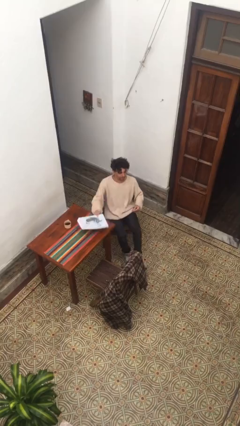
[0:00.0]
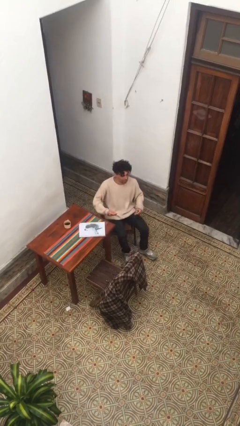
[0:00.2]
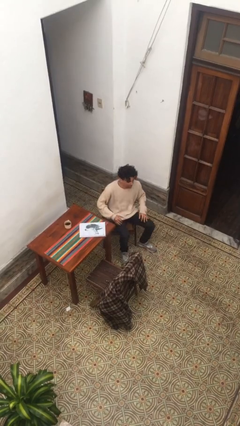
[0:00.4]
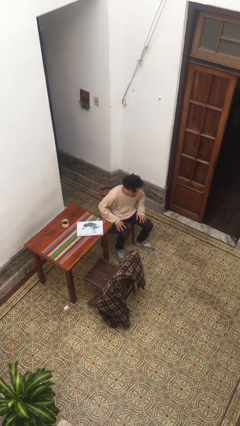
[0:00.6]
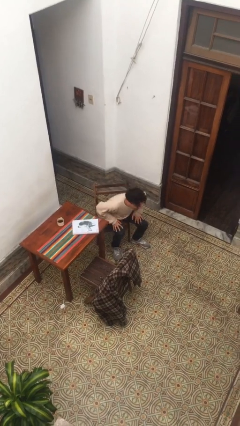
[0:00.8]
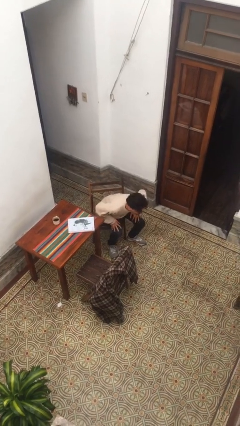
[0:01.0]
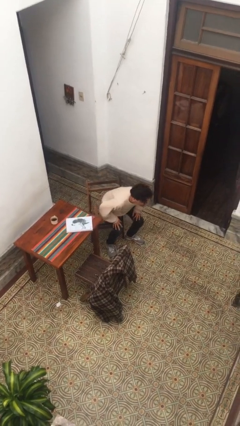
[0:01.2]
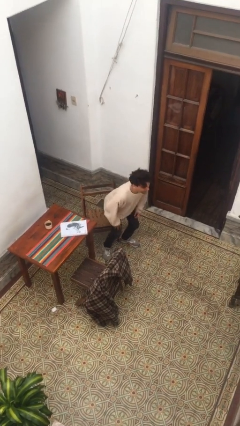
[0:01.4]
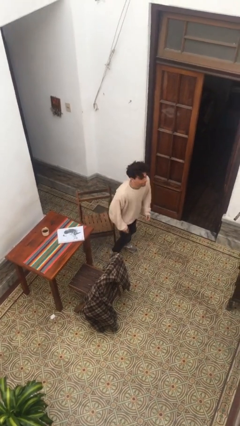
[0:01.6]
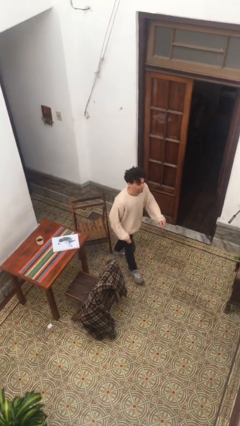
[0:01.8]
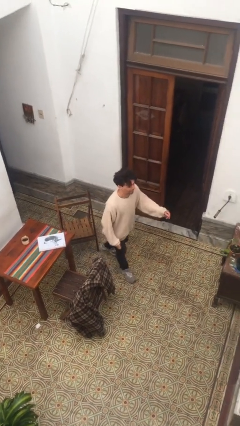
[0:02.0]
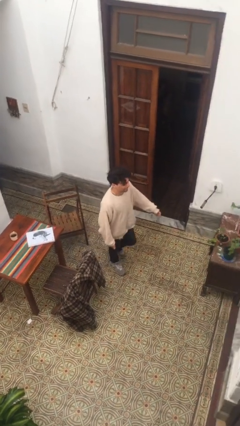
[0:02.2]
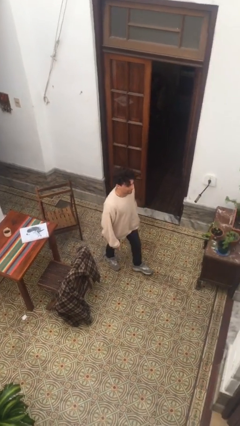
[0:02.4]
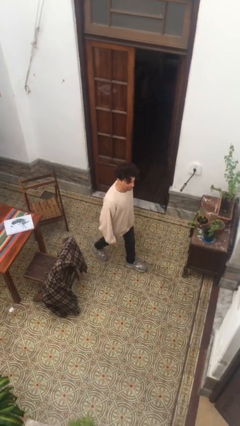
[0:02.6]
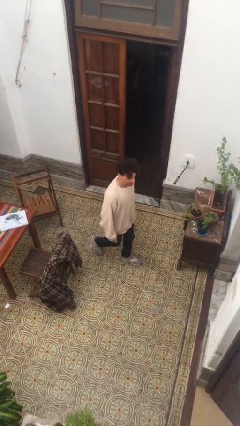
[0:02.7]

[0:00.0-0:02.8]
person stands up

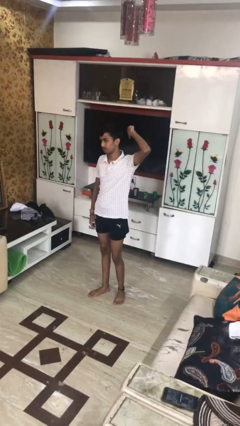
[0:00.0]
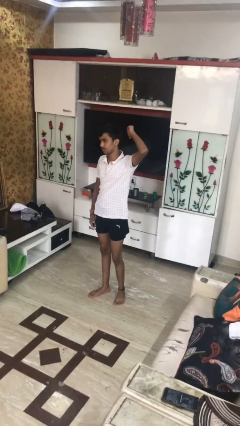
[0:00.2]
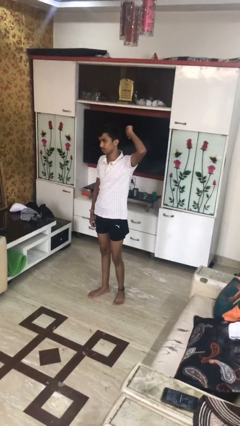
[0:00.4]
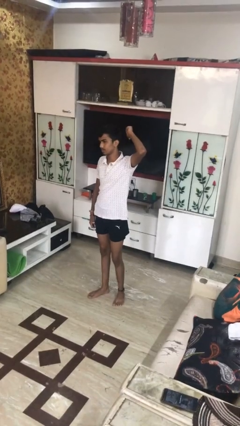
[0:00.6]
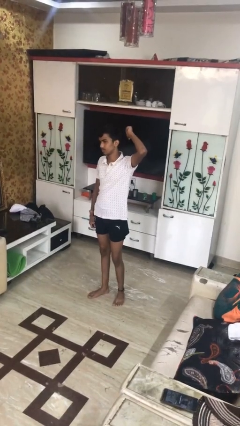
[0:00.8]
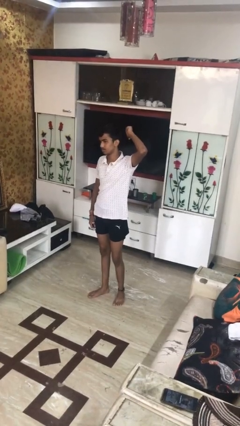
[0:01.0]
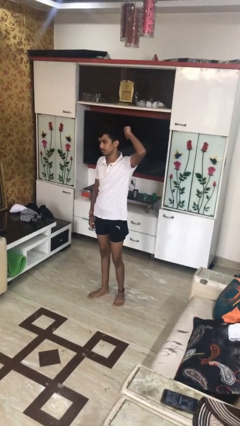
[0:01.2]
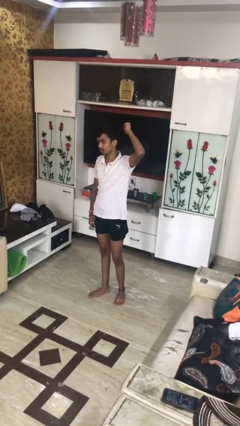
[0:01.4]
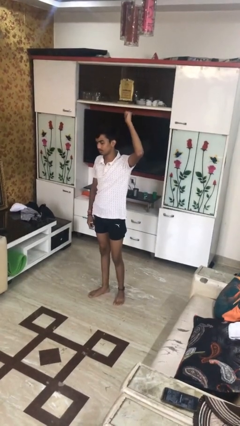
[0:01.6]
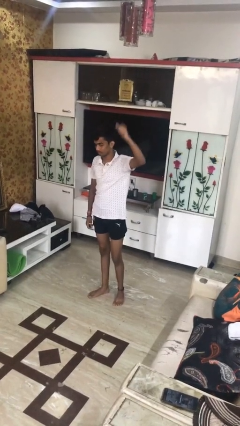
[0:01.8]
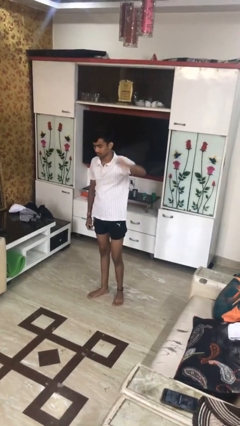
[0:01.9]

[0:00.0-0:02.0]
person gestures behind me

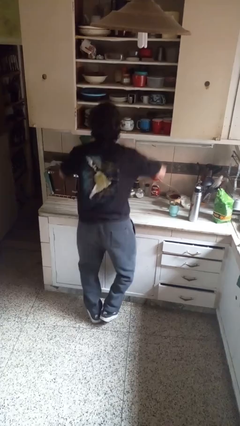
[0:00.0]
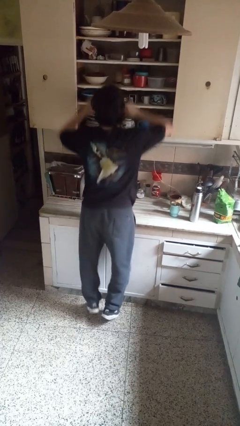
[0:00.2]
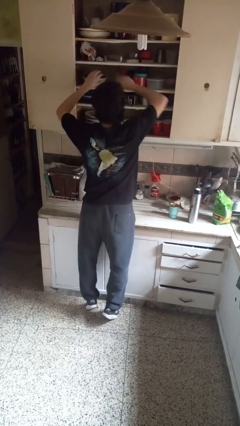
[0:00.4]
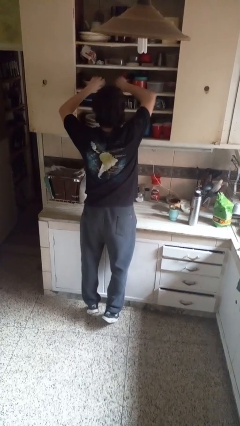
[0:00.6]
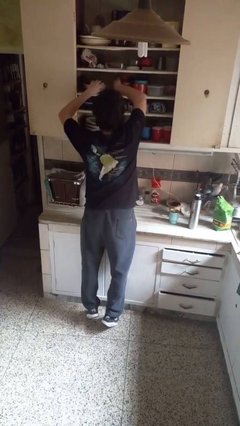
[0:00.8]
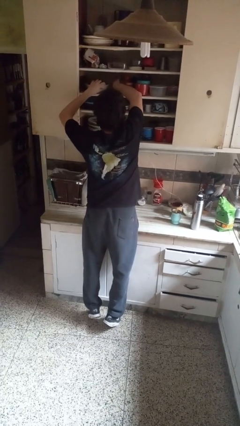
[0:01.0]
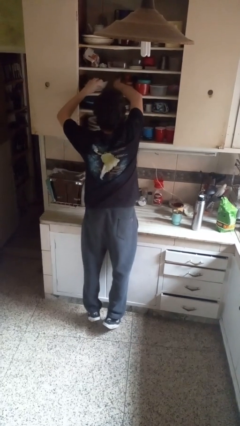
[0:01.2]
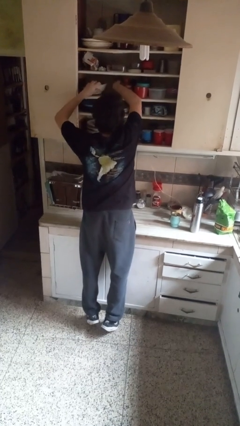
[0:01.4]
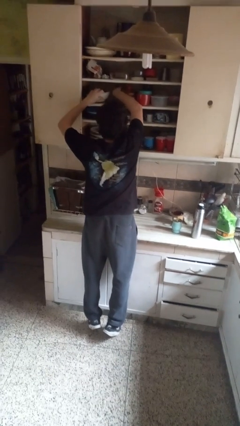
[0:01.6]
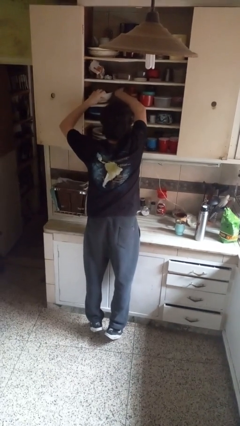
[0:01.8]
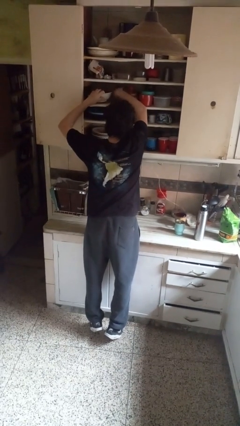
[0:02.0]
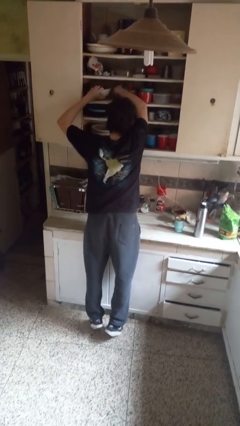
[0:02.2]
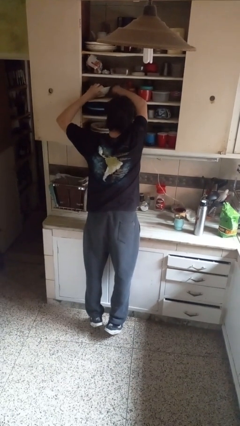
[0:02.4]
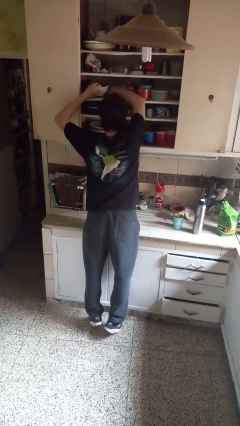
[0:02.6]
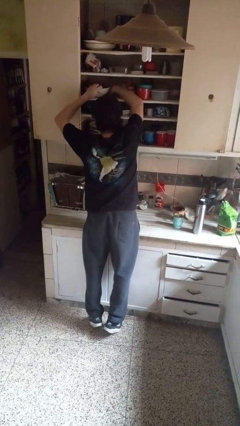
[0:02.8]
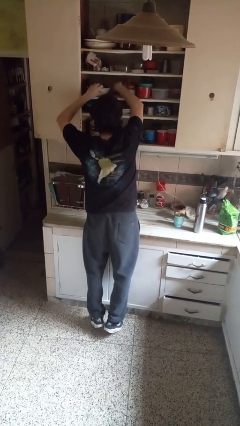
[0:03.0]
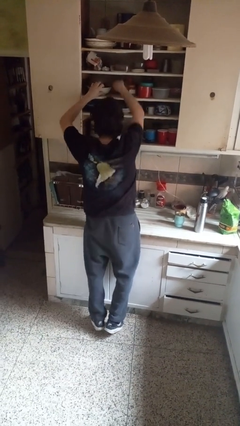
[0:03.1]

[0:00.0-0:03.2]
person searches in cabinet

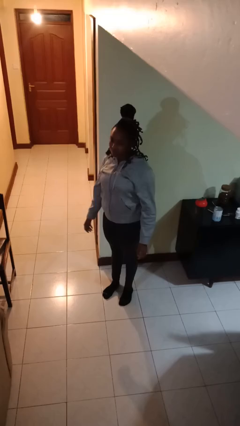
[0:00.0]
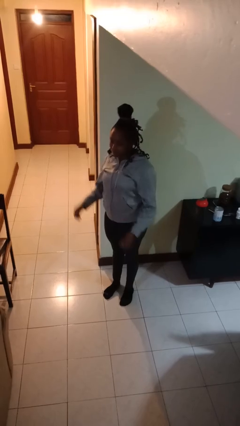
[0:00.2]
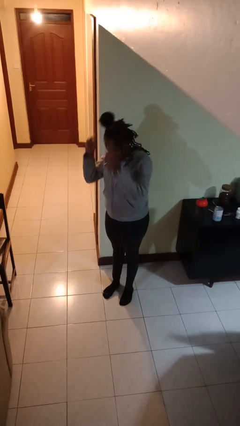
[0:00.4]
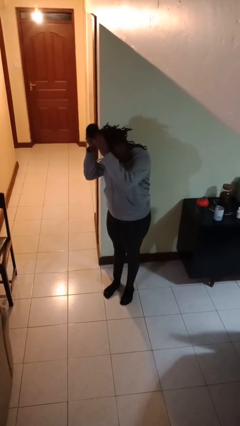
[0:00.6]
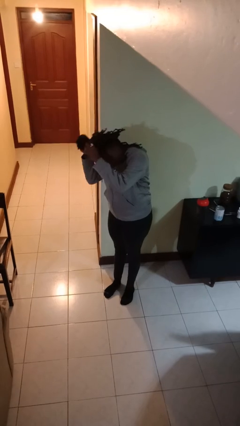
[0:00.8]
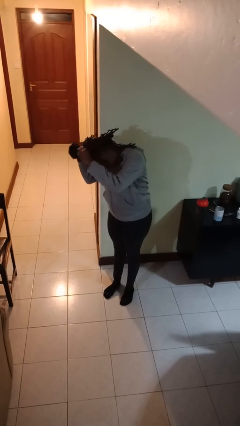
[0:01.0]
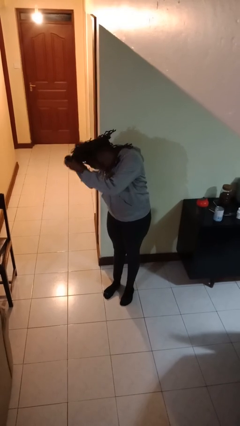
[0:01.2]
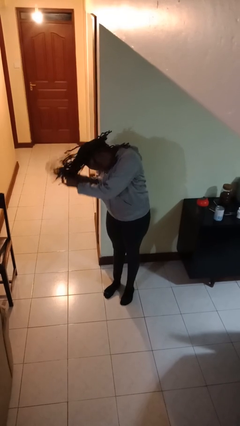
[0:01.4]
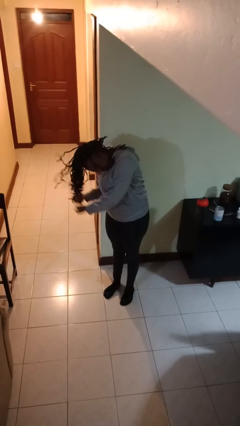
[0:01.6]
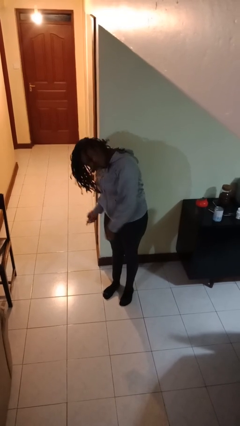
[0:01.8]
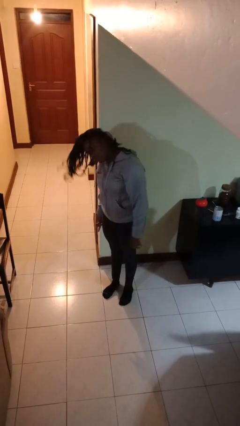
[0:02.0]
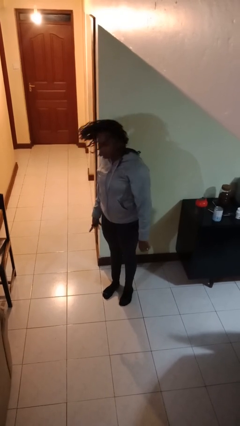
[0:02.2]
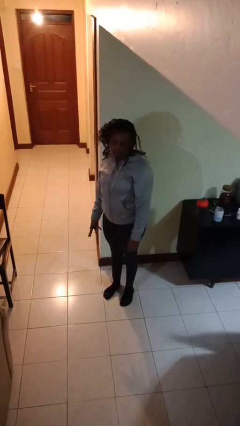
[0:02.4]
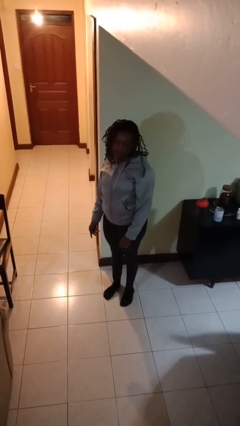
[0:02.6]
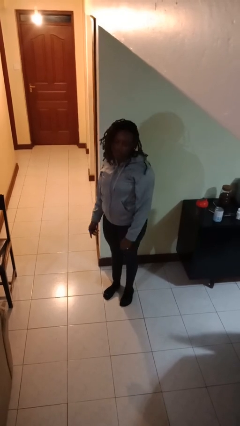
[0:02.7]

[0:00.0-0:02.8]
person takes off hairtie

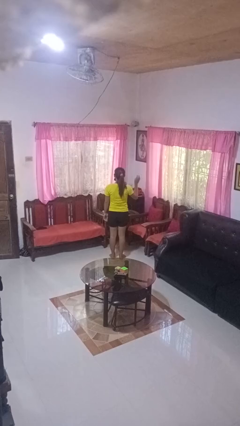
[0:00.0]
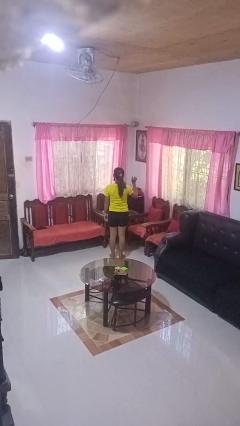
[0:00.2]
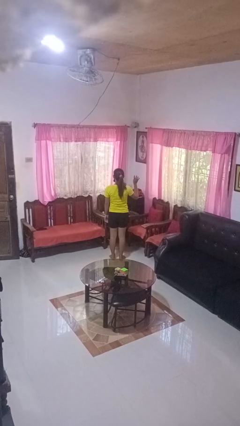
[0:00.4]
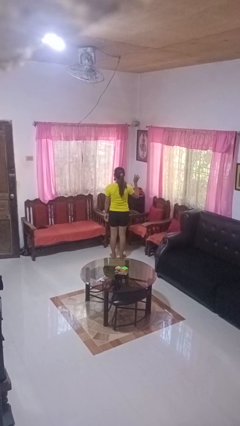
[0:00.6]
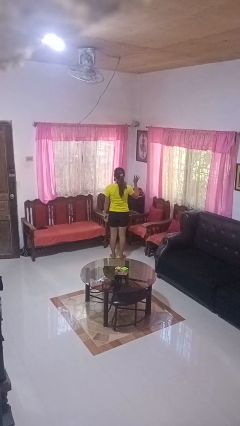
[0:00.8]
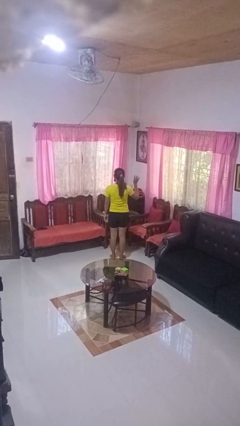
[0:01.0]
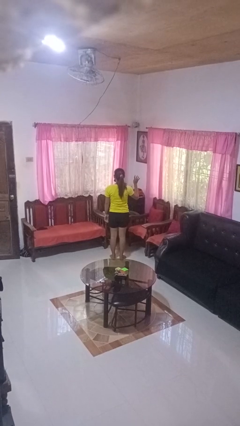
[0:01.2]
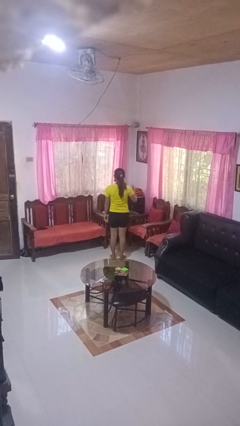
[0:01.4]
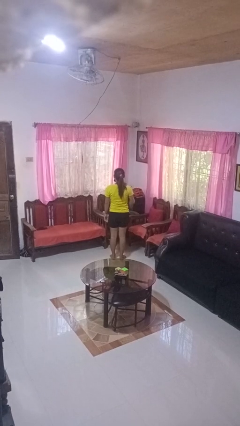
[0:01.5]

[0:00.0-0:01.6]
person gestures number four

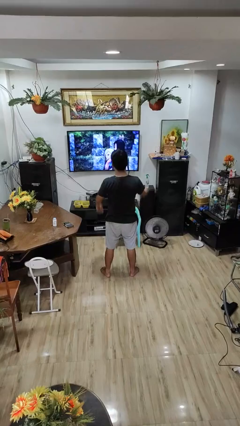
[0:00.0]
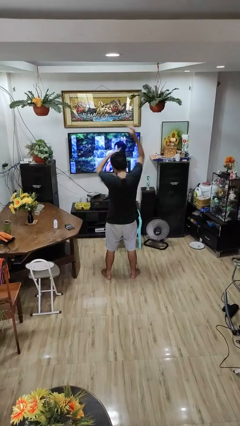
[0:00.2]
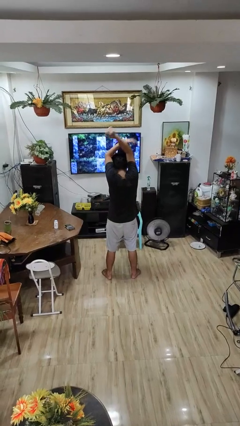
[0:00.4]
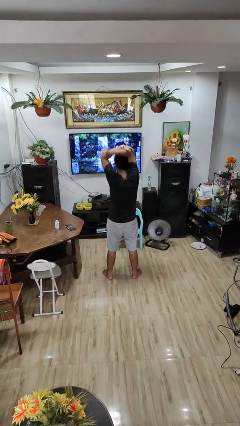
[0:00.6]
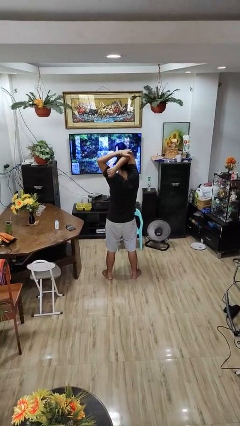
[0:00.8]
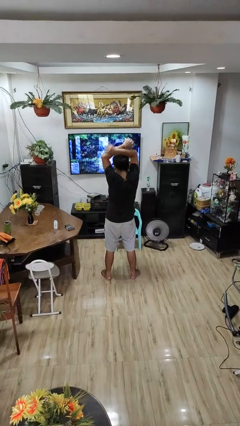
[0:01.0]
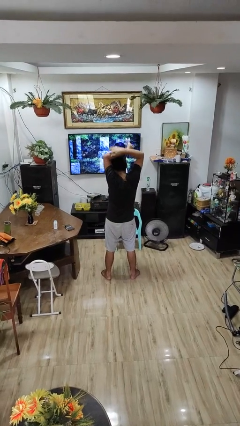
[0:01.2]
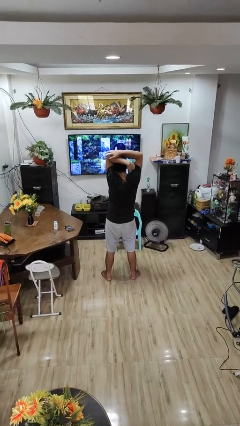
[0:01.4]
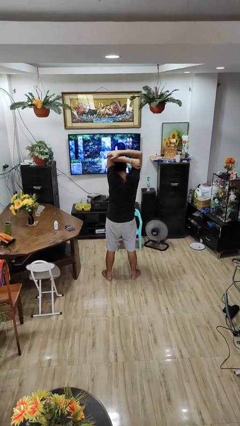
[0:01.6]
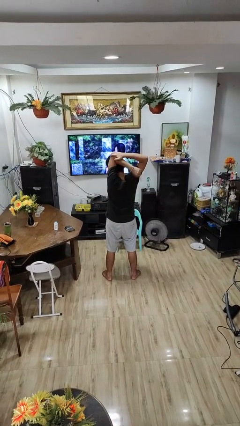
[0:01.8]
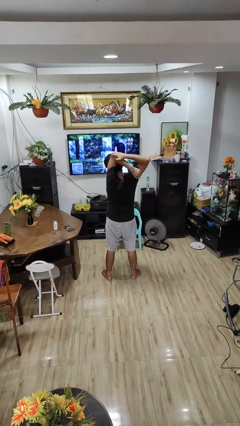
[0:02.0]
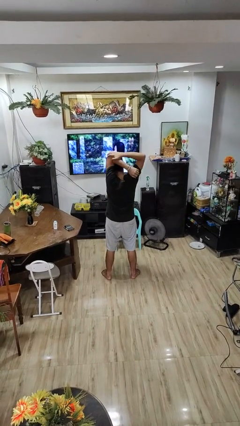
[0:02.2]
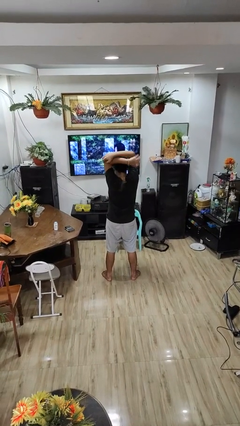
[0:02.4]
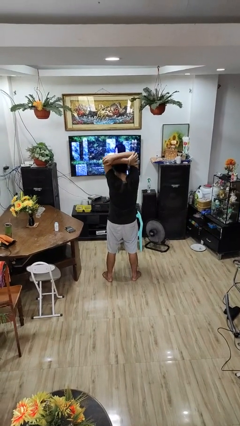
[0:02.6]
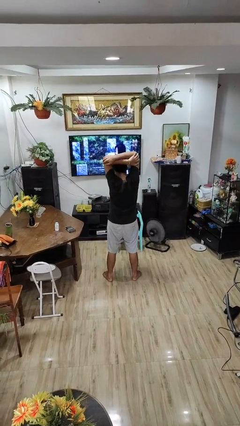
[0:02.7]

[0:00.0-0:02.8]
person stretches arms over head

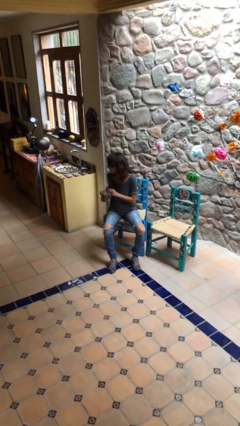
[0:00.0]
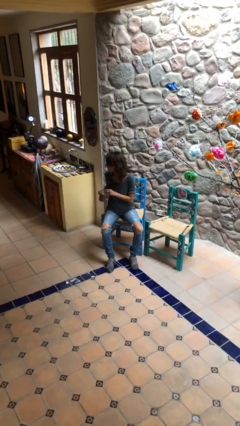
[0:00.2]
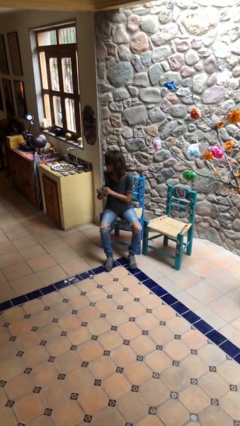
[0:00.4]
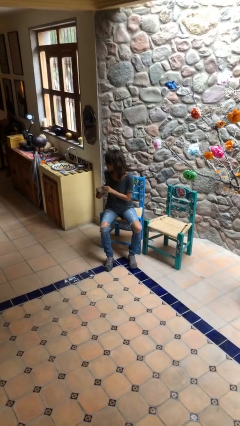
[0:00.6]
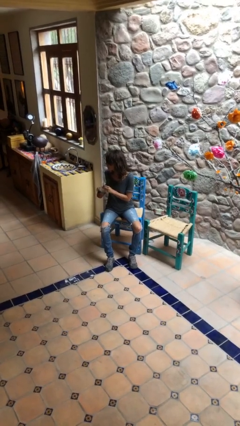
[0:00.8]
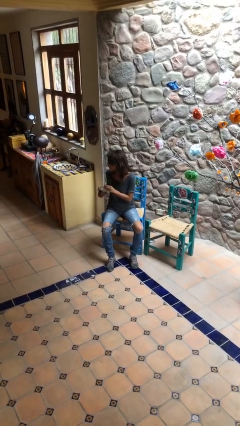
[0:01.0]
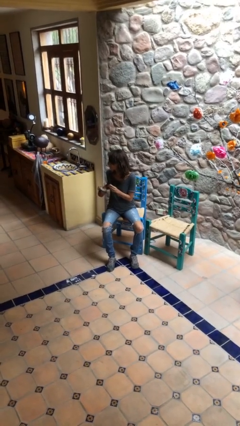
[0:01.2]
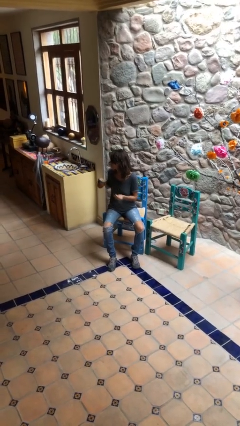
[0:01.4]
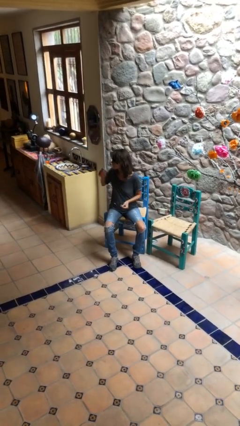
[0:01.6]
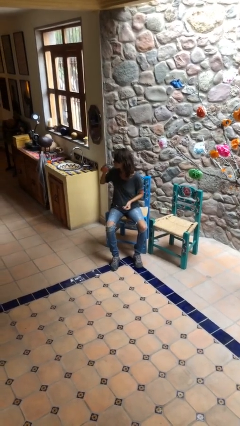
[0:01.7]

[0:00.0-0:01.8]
person stirs mug
